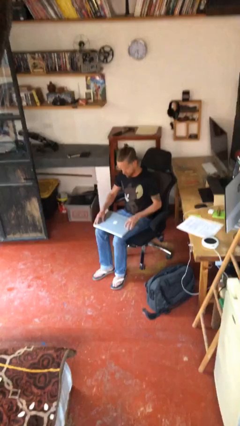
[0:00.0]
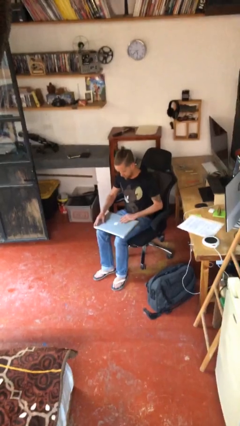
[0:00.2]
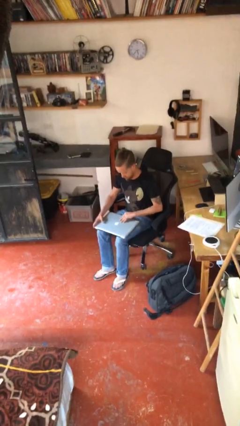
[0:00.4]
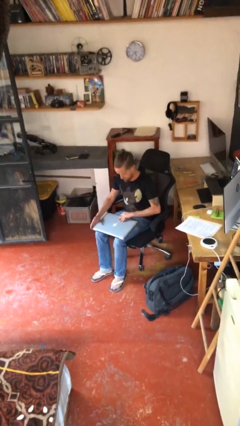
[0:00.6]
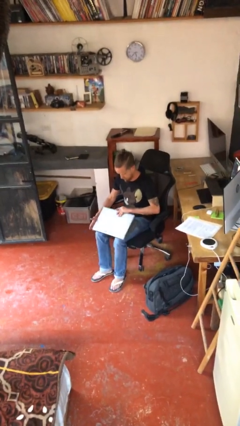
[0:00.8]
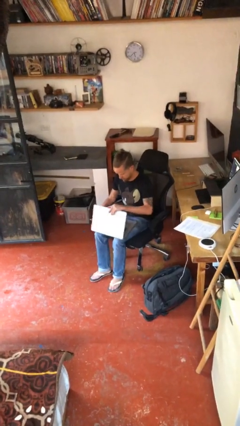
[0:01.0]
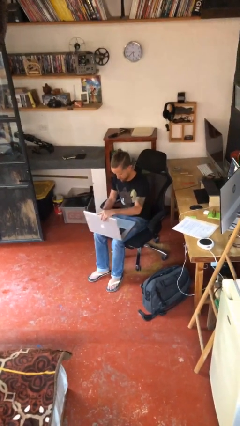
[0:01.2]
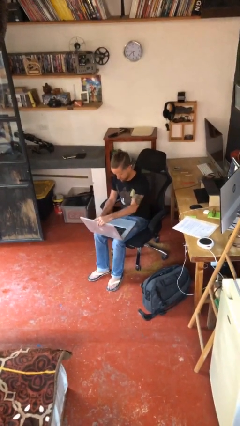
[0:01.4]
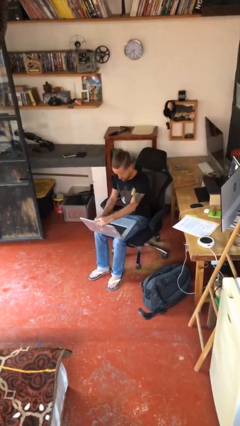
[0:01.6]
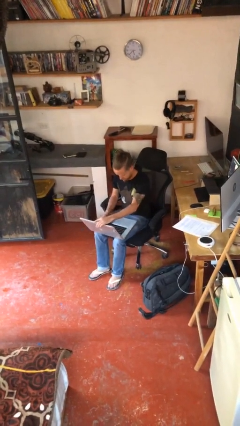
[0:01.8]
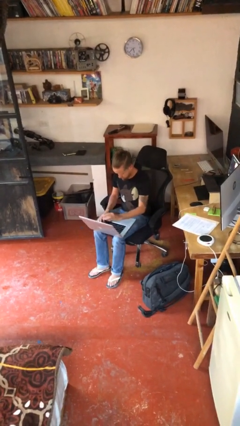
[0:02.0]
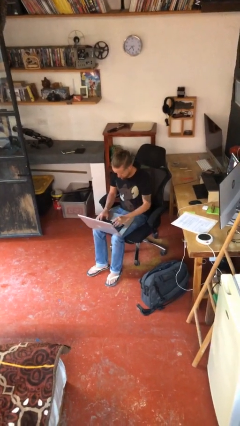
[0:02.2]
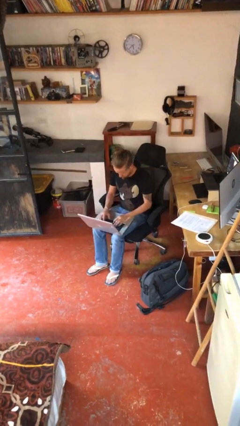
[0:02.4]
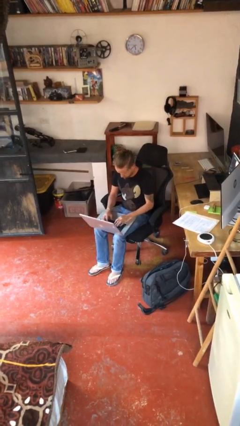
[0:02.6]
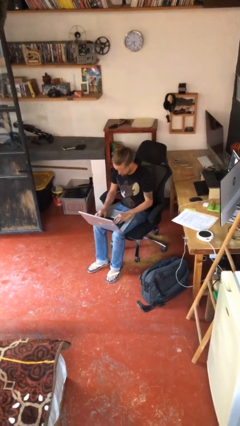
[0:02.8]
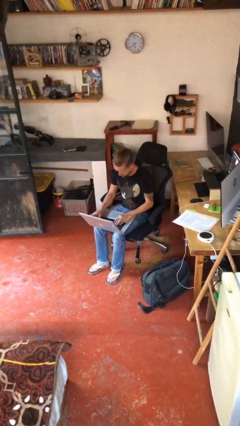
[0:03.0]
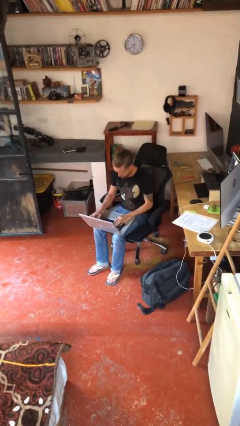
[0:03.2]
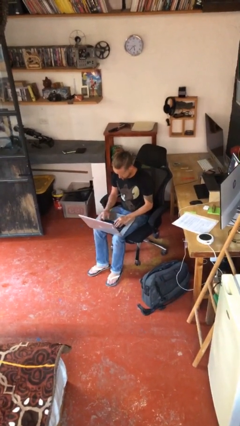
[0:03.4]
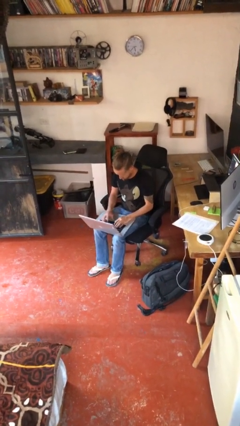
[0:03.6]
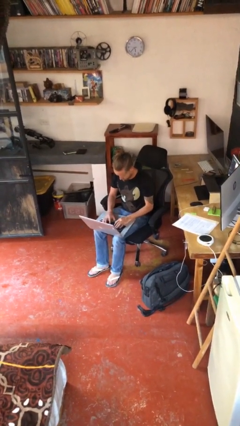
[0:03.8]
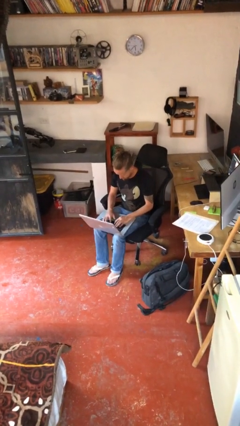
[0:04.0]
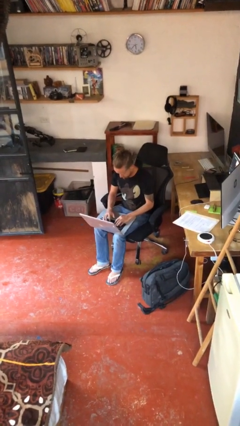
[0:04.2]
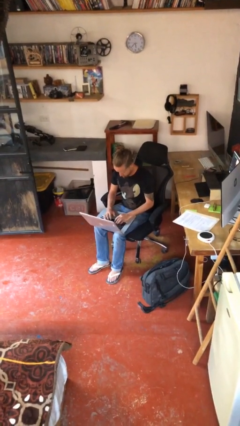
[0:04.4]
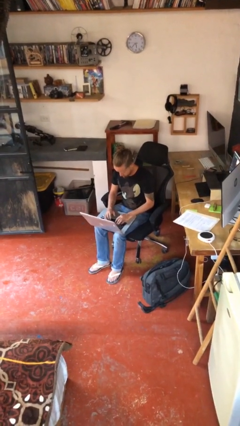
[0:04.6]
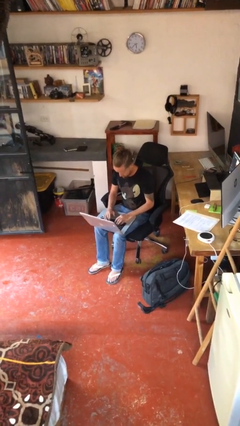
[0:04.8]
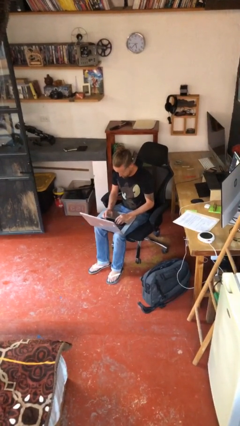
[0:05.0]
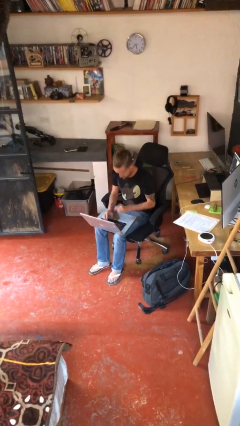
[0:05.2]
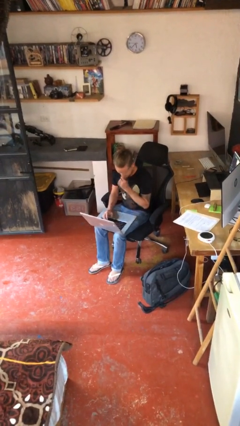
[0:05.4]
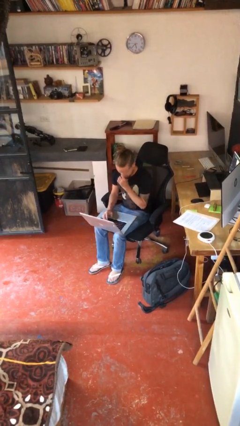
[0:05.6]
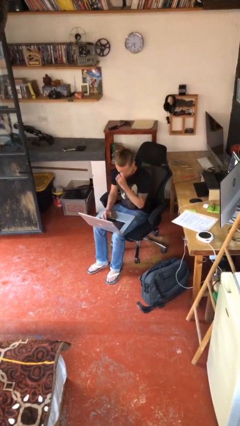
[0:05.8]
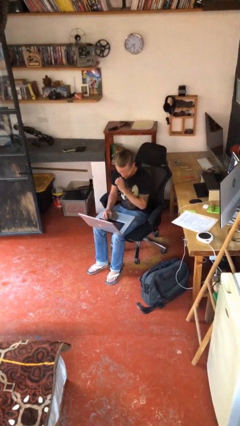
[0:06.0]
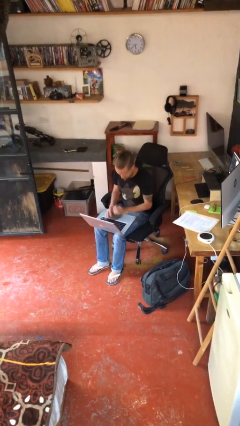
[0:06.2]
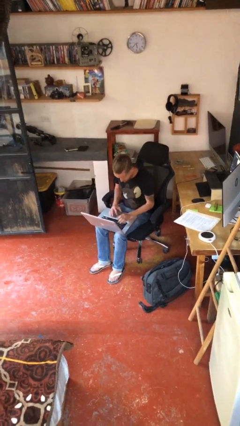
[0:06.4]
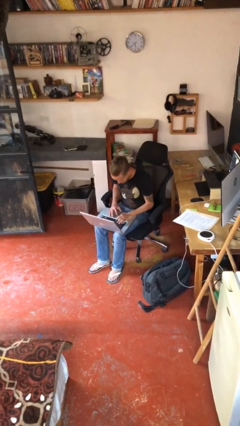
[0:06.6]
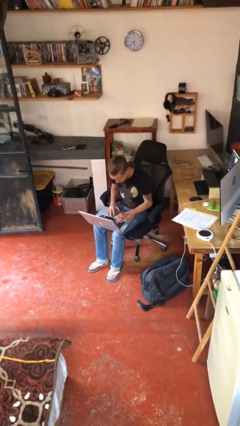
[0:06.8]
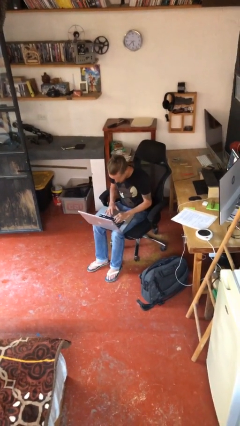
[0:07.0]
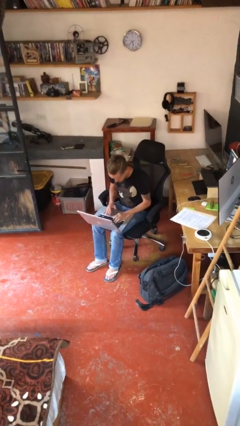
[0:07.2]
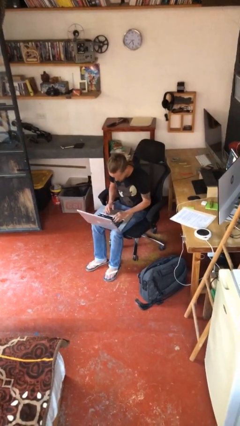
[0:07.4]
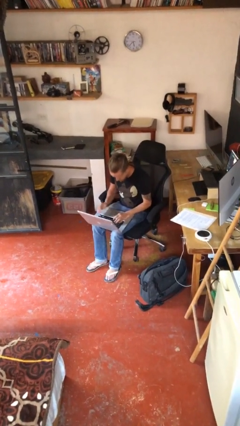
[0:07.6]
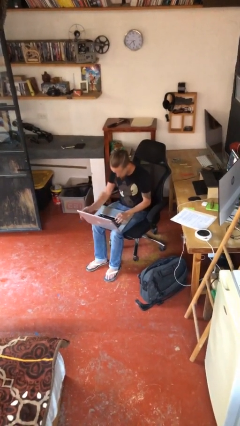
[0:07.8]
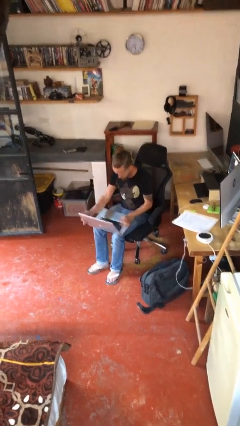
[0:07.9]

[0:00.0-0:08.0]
person interacts with laptop

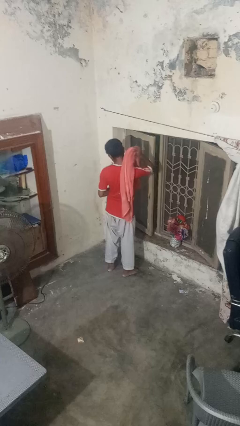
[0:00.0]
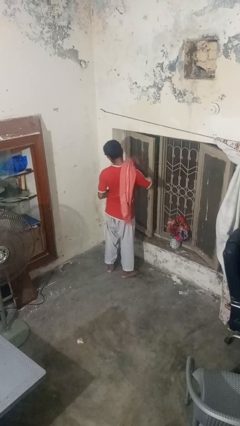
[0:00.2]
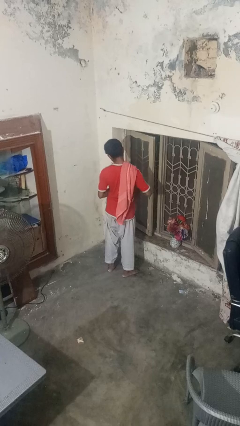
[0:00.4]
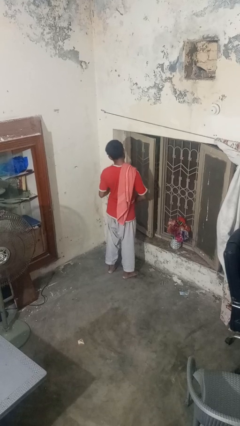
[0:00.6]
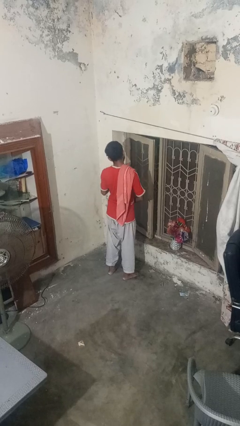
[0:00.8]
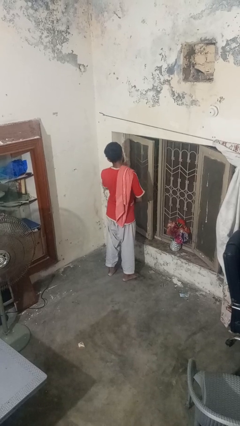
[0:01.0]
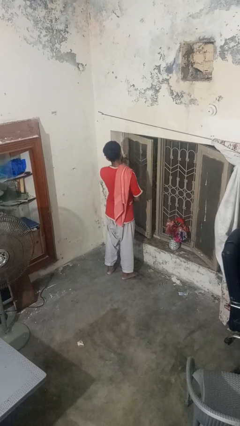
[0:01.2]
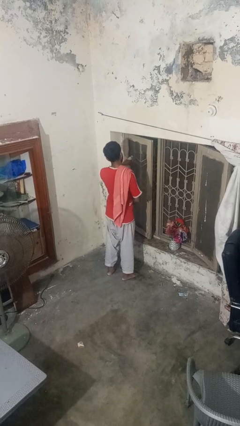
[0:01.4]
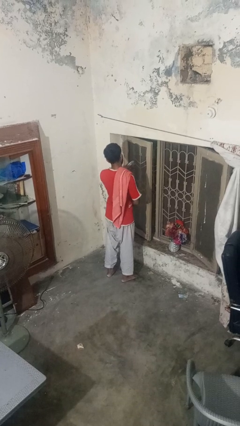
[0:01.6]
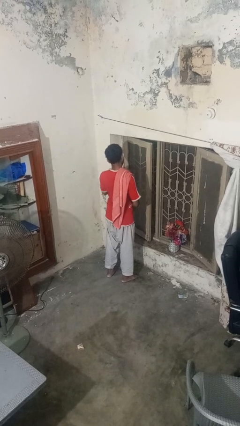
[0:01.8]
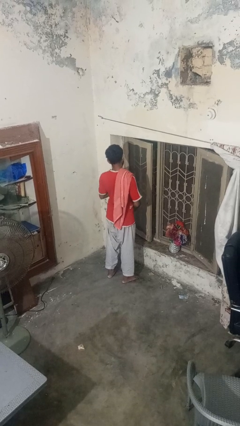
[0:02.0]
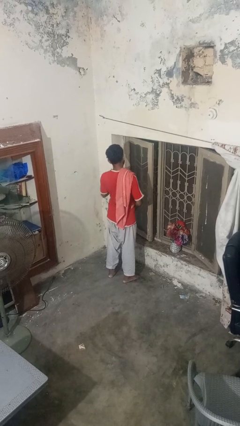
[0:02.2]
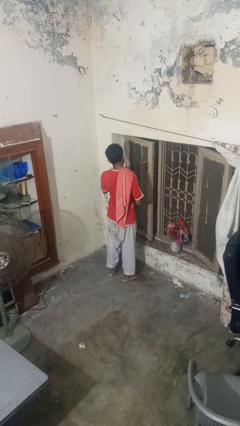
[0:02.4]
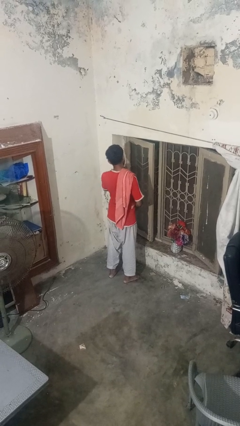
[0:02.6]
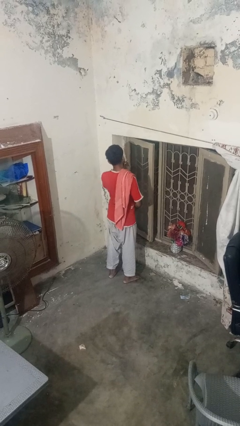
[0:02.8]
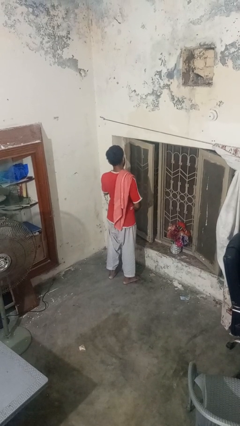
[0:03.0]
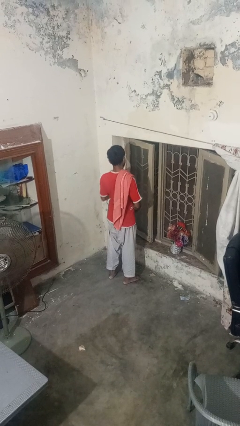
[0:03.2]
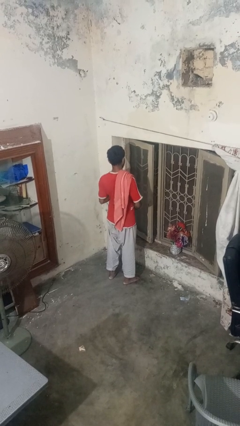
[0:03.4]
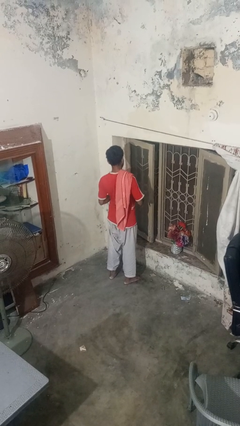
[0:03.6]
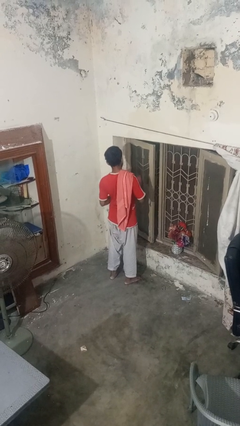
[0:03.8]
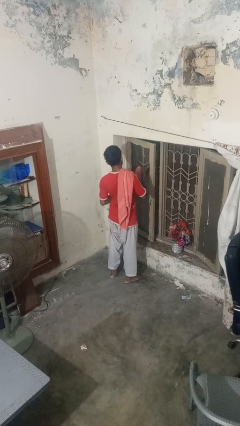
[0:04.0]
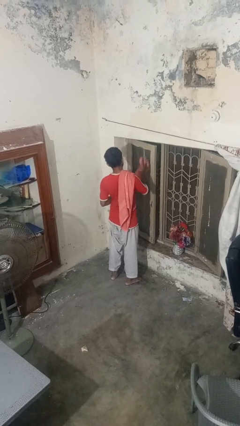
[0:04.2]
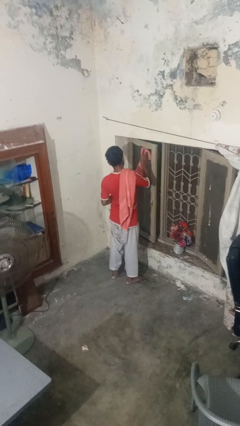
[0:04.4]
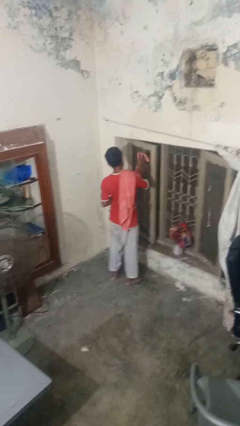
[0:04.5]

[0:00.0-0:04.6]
person sprays from bottle

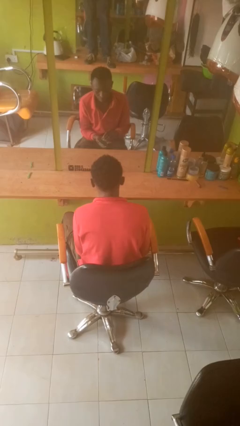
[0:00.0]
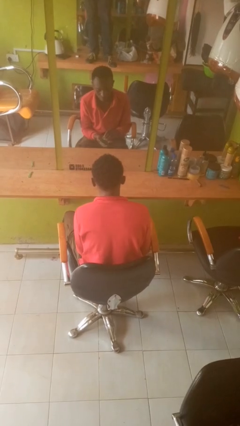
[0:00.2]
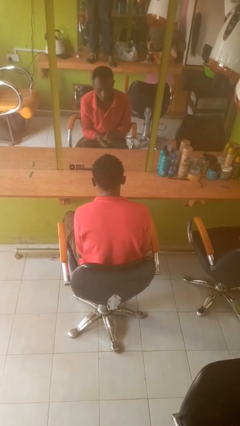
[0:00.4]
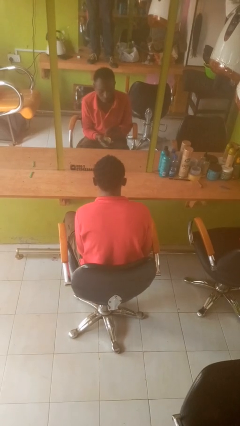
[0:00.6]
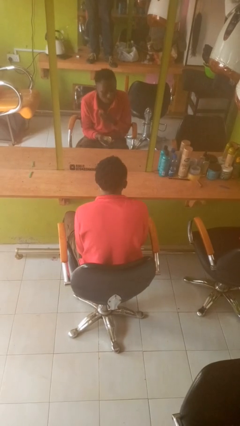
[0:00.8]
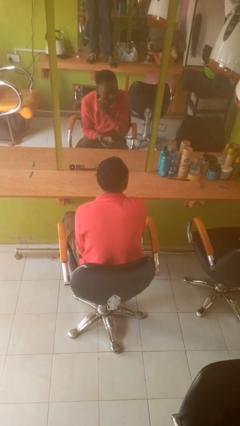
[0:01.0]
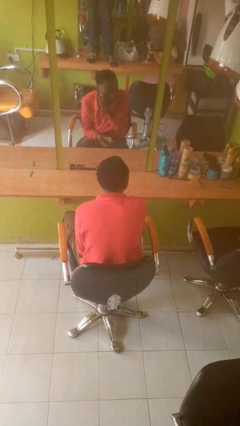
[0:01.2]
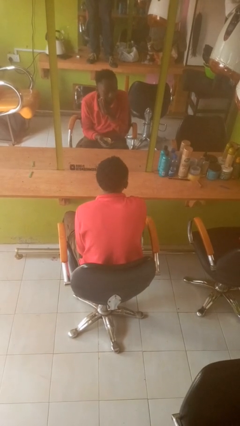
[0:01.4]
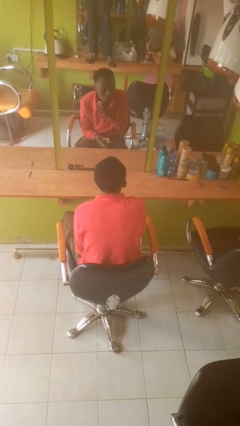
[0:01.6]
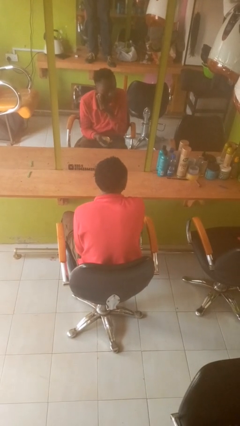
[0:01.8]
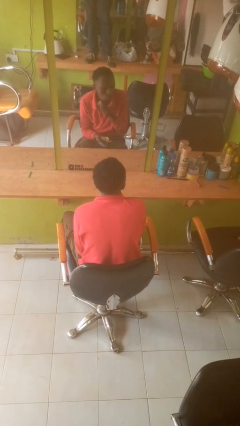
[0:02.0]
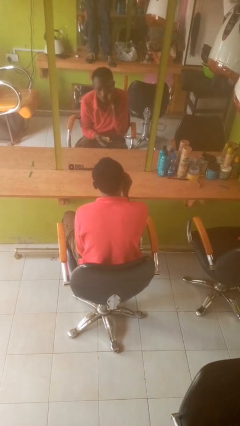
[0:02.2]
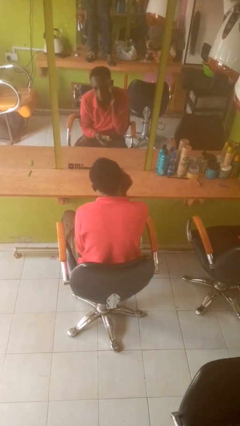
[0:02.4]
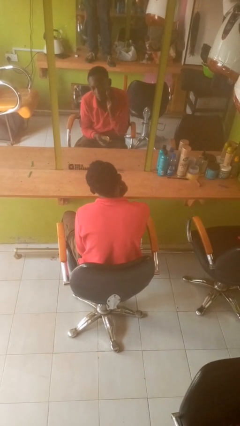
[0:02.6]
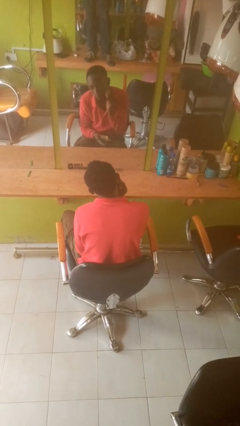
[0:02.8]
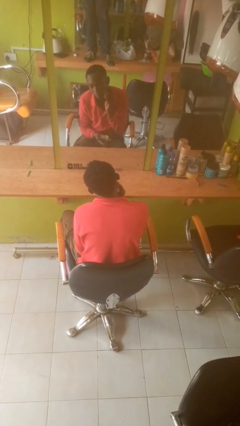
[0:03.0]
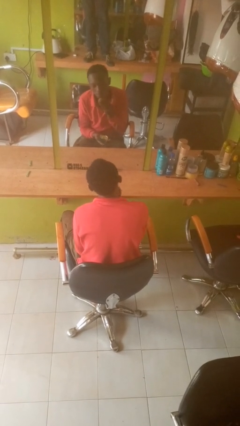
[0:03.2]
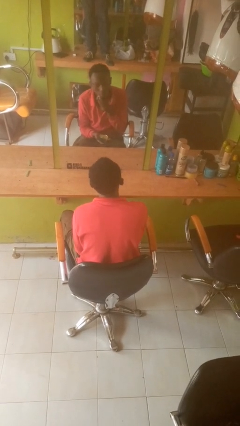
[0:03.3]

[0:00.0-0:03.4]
person applies foundation makeup

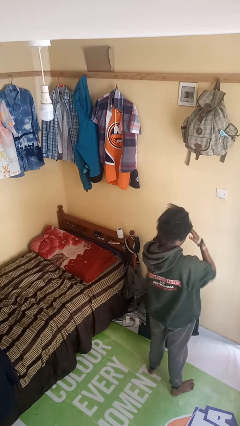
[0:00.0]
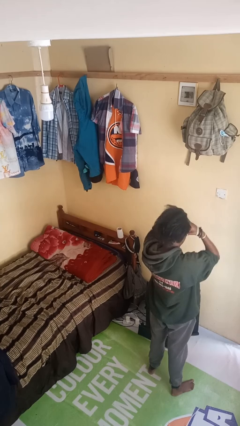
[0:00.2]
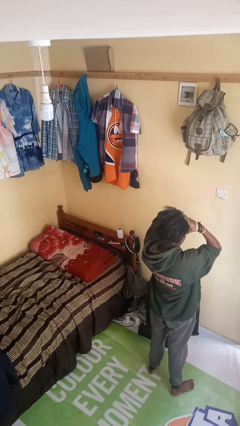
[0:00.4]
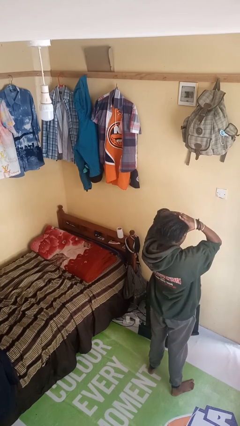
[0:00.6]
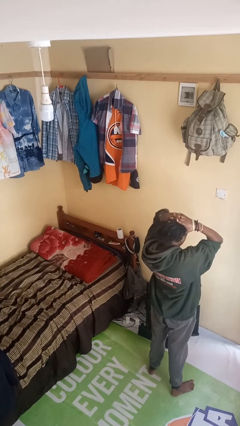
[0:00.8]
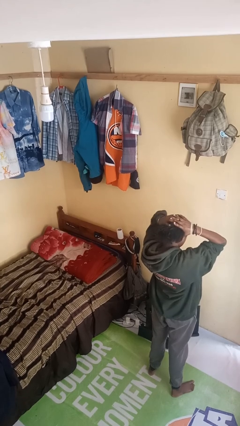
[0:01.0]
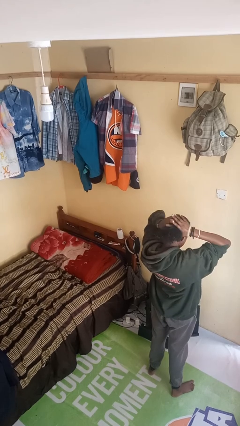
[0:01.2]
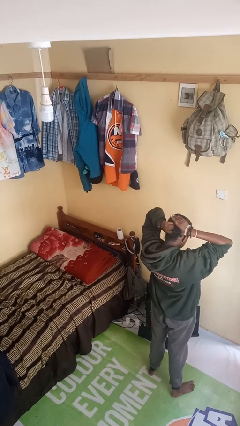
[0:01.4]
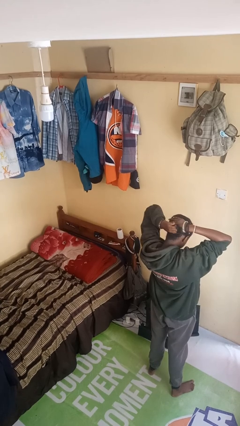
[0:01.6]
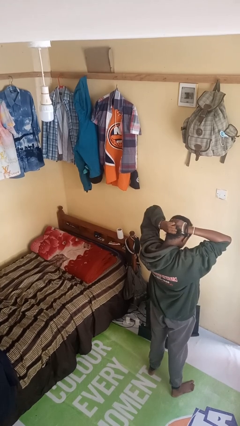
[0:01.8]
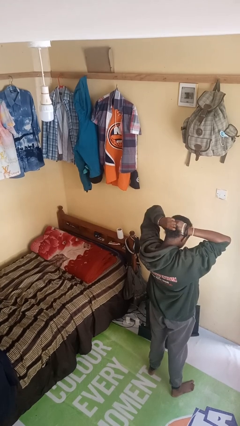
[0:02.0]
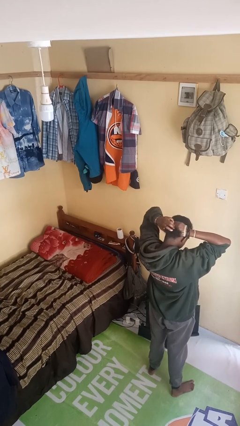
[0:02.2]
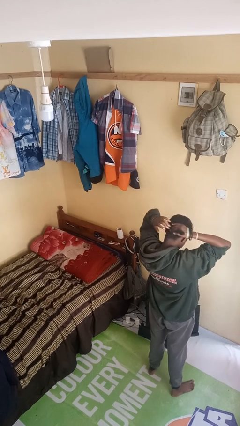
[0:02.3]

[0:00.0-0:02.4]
person strokes hair
